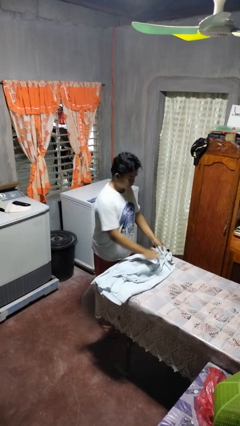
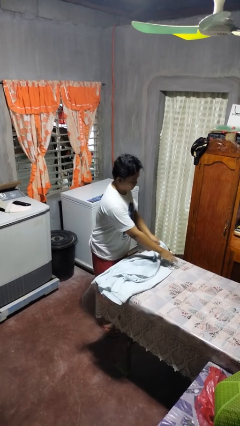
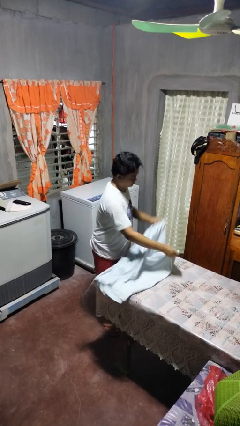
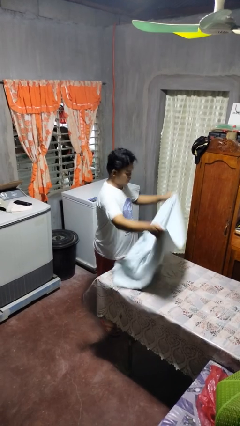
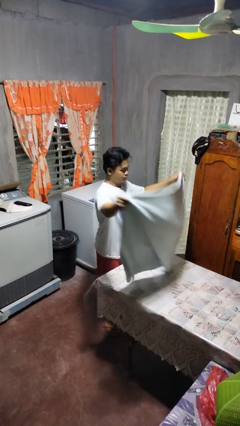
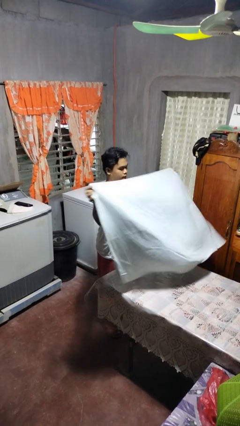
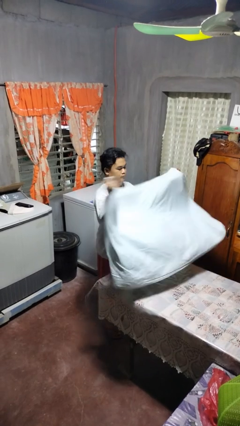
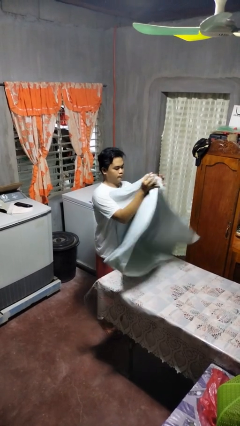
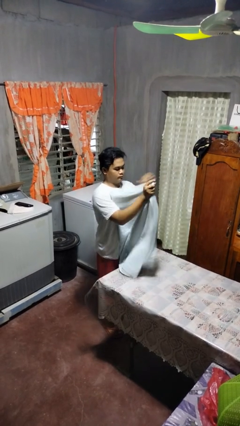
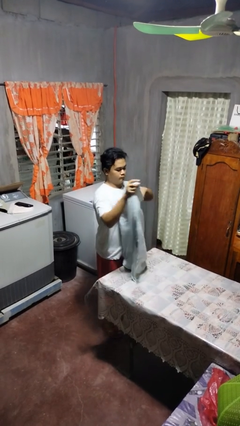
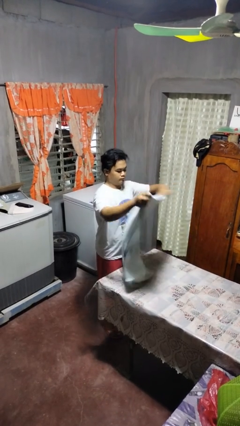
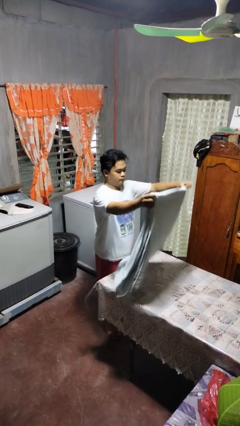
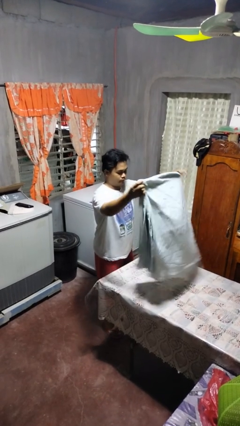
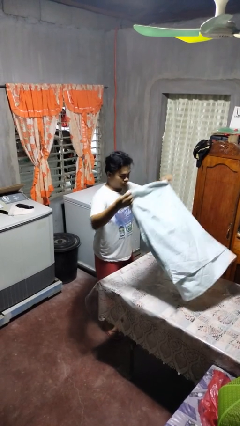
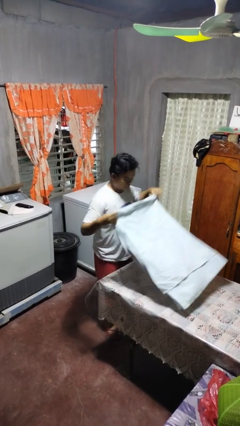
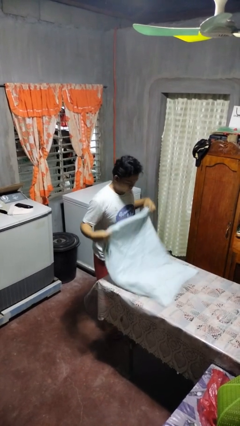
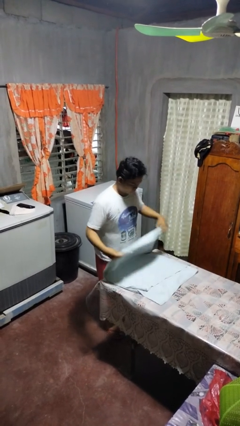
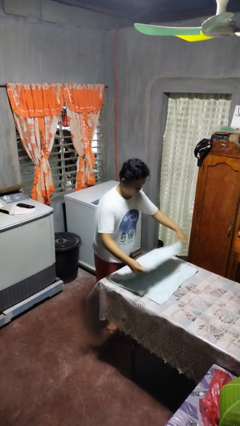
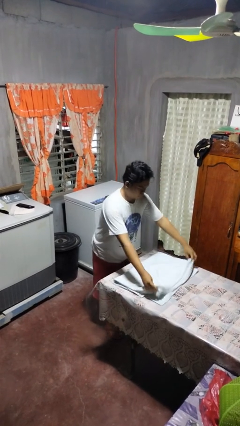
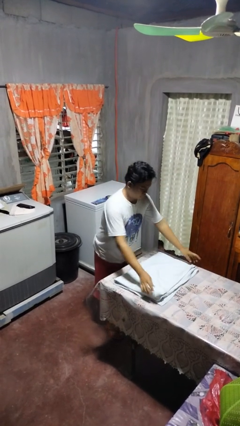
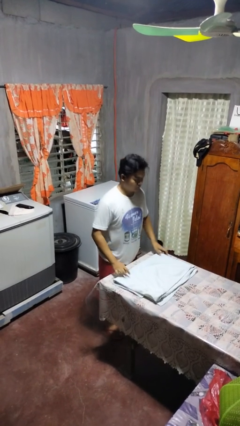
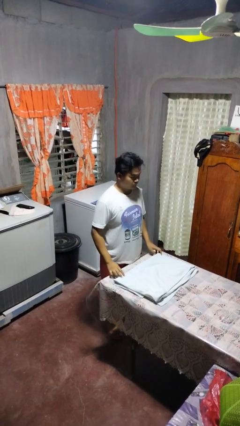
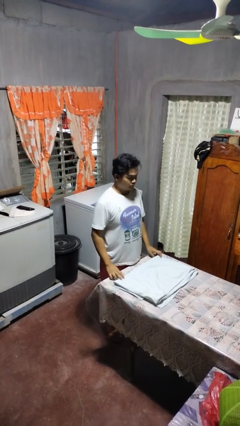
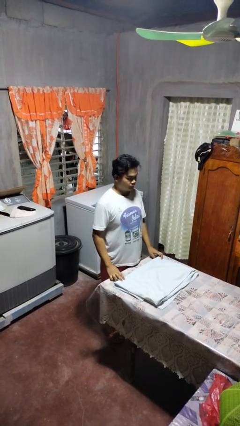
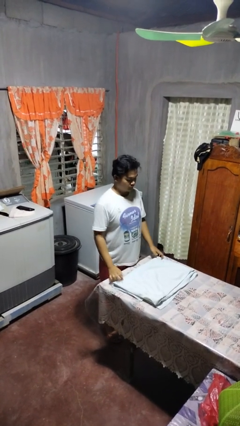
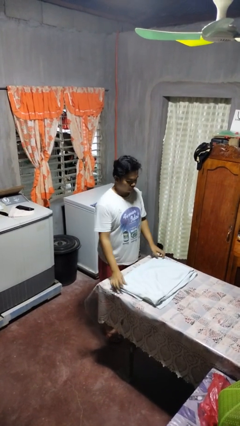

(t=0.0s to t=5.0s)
person folds blanket

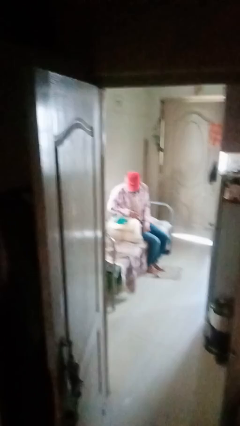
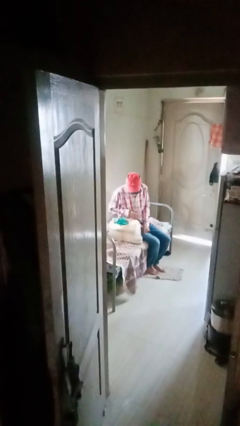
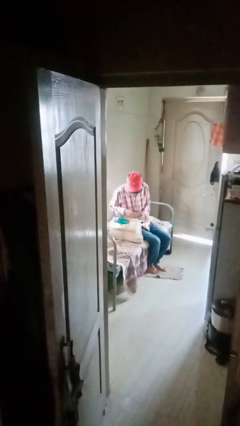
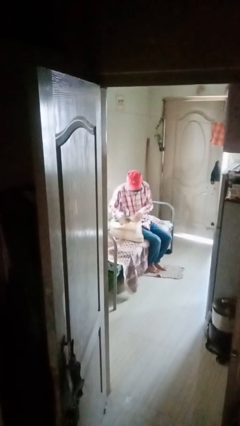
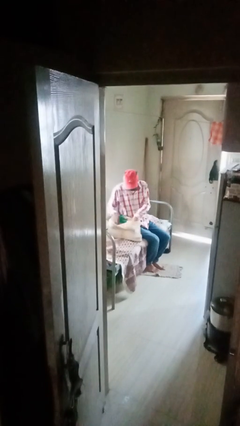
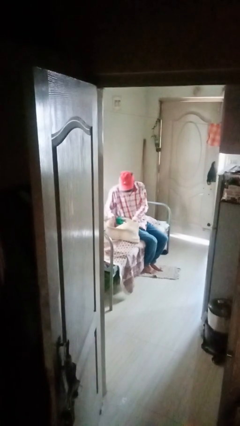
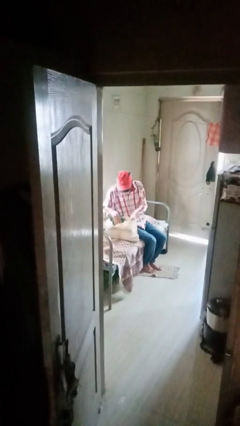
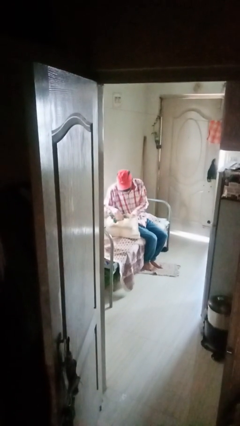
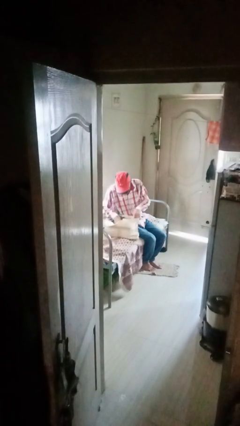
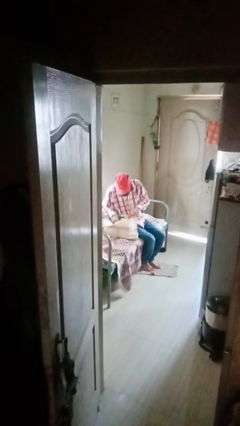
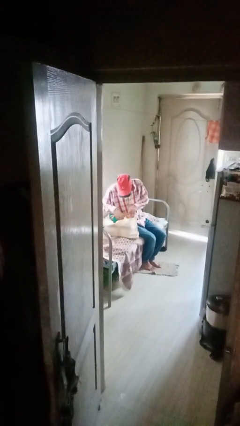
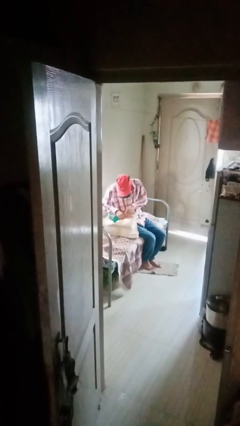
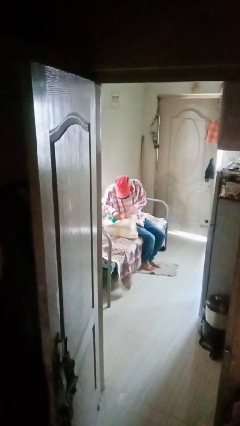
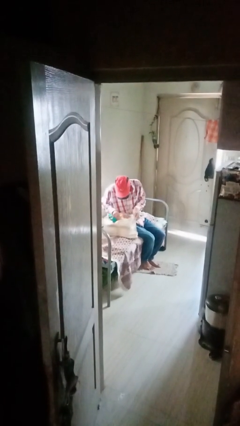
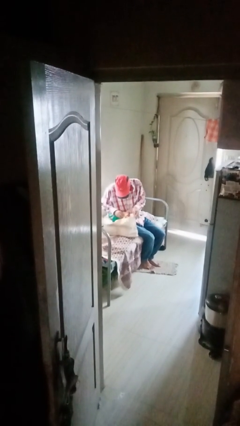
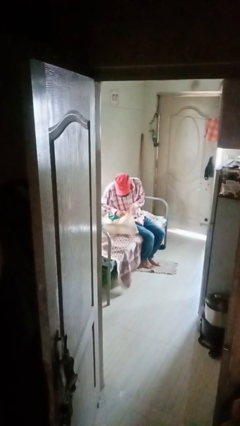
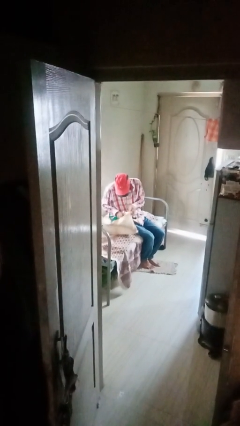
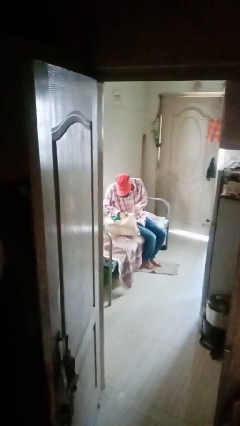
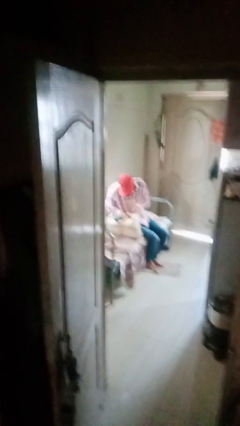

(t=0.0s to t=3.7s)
person searches in bag

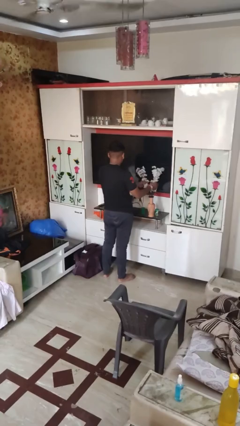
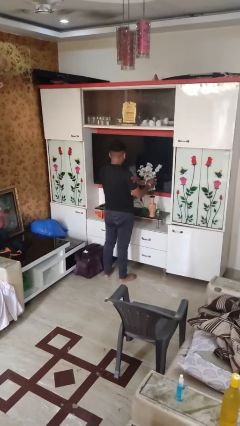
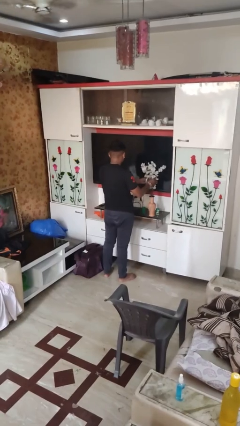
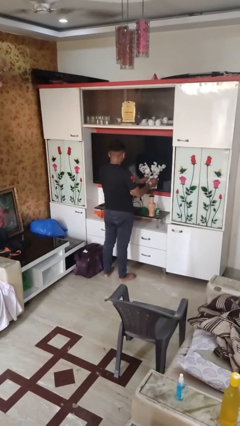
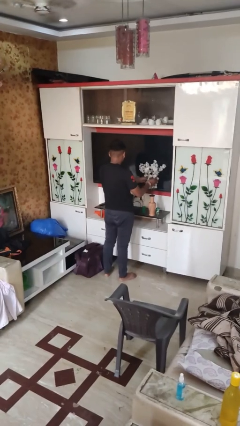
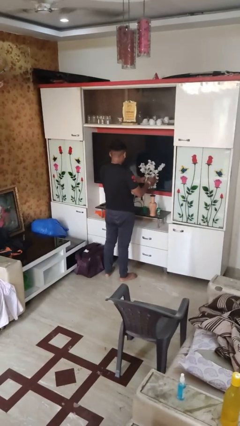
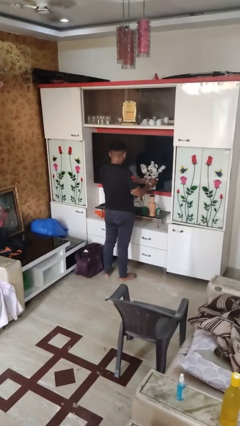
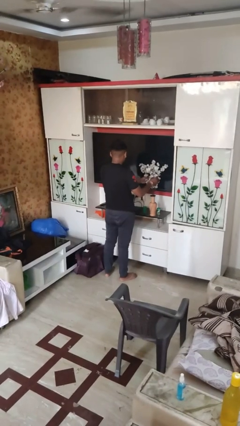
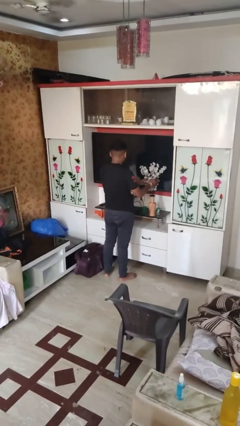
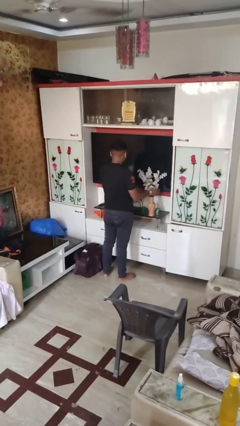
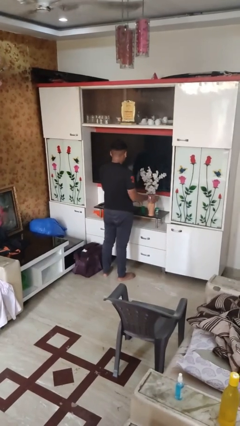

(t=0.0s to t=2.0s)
person arranges flowers in vase

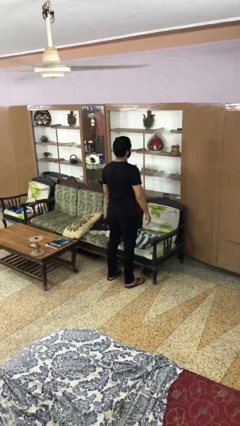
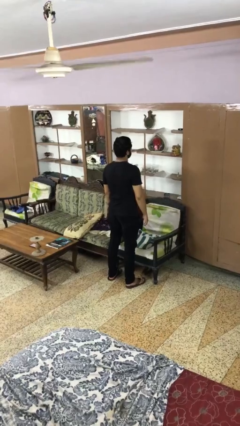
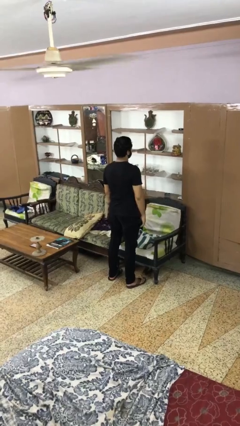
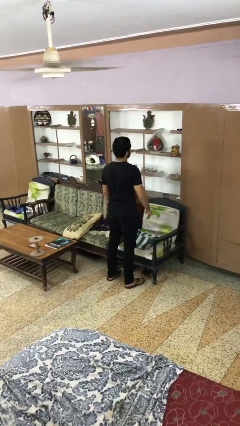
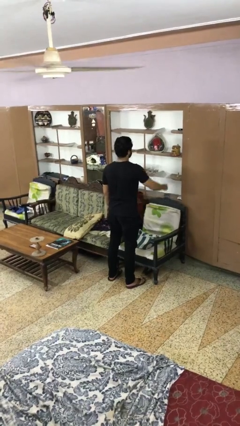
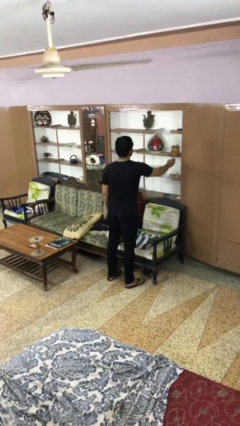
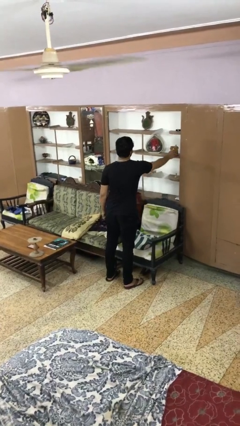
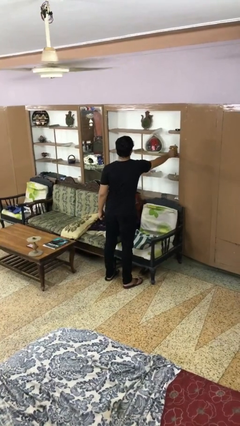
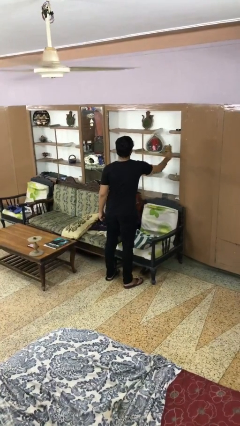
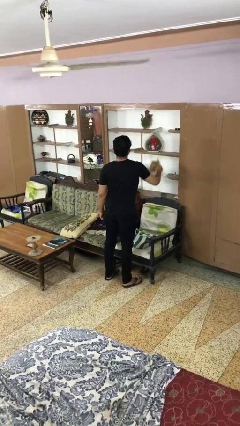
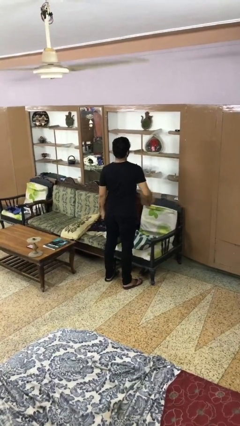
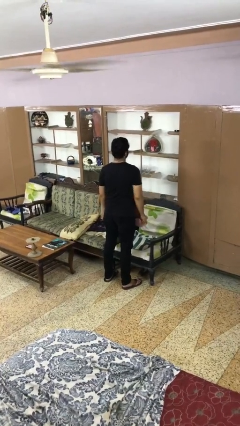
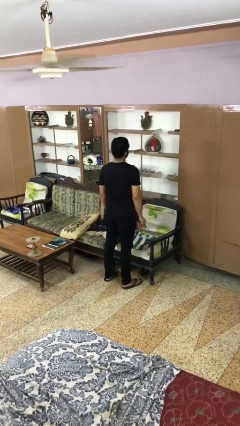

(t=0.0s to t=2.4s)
person picks up object from shelf

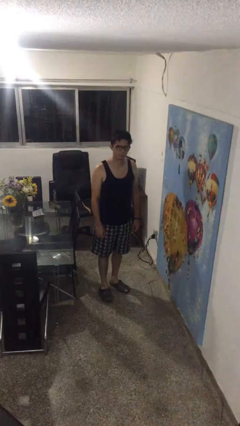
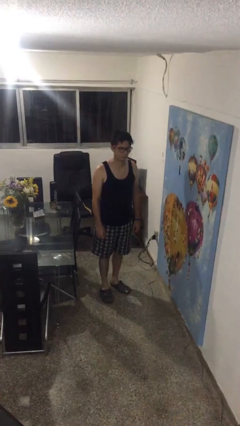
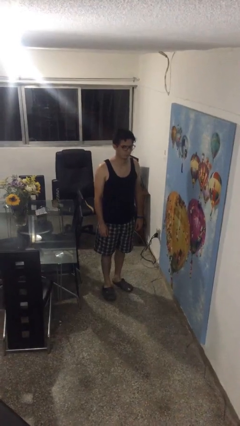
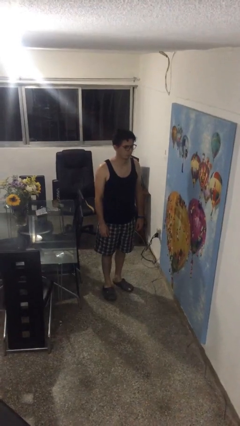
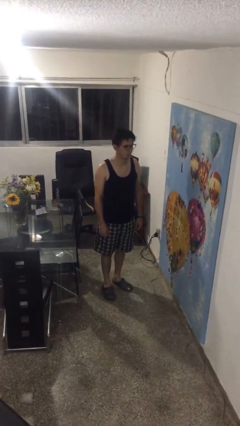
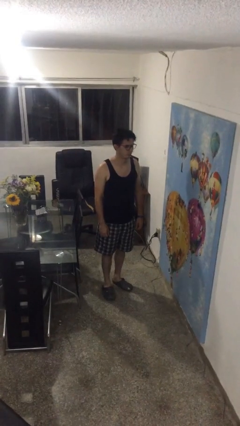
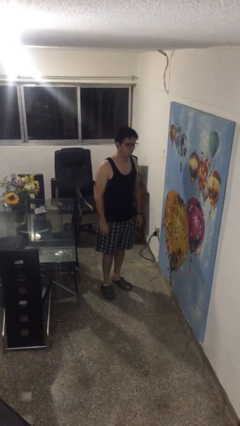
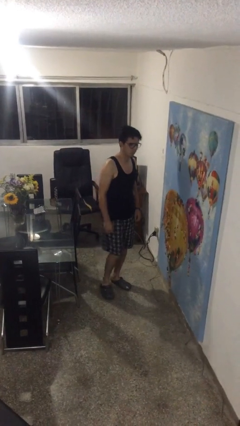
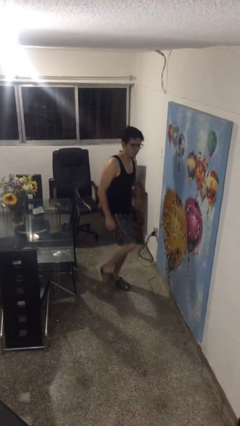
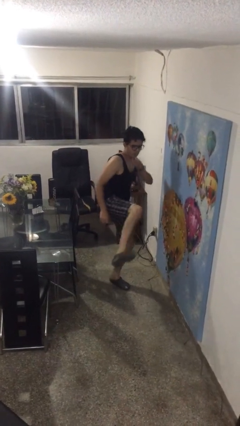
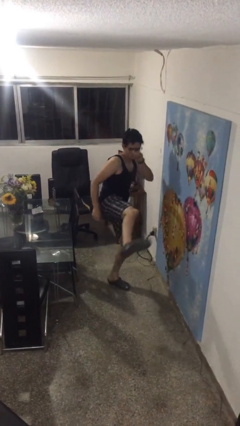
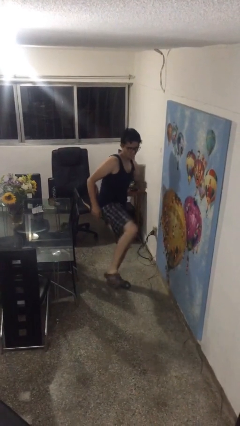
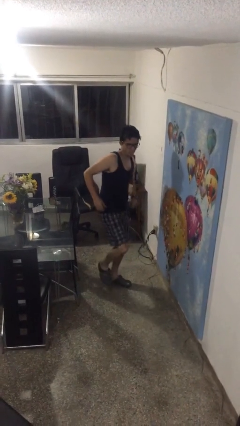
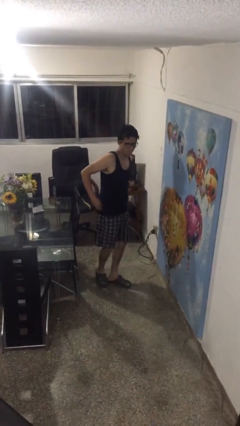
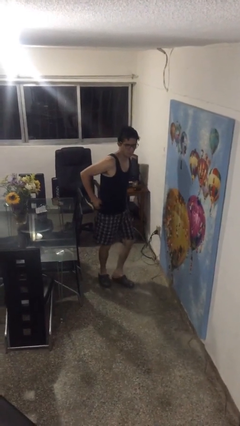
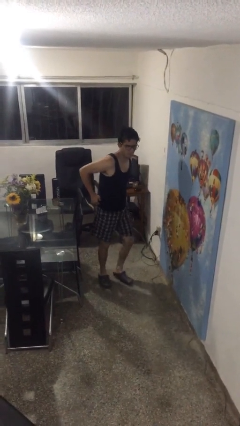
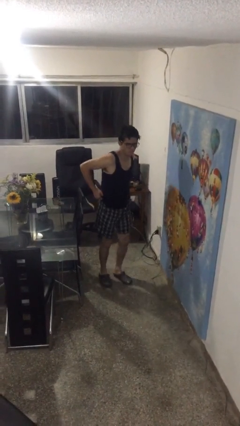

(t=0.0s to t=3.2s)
person karate kicks

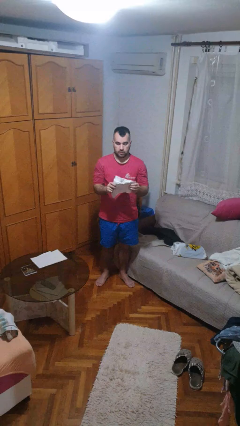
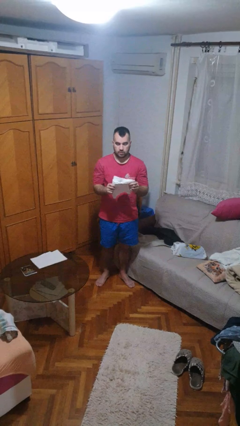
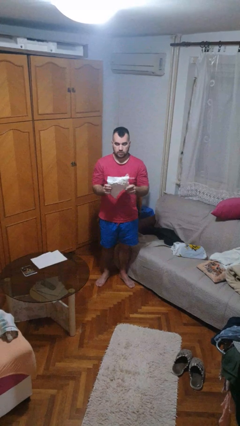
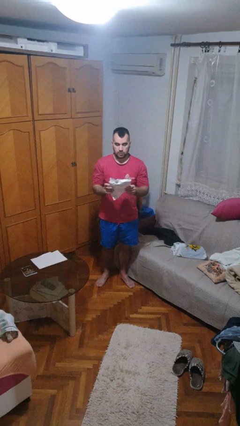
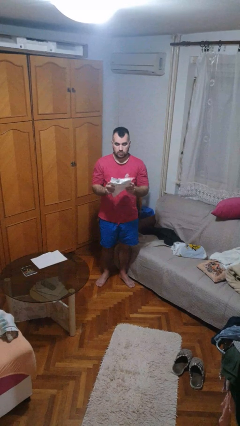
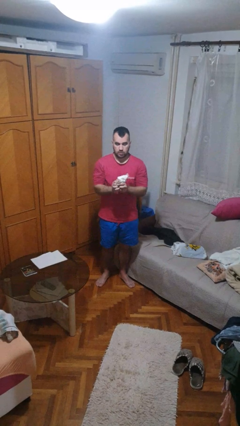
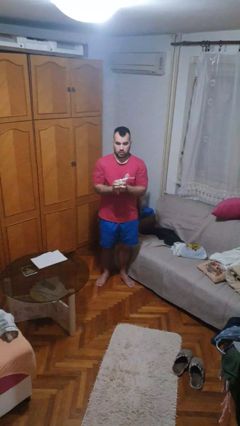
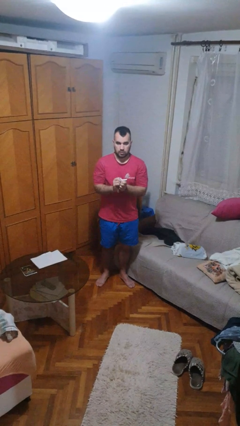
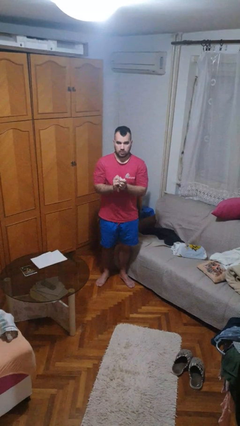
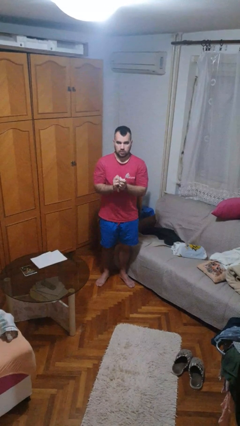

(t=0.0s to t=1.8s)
person crumples paper
